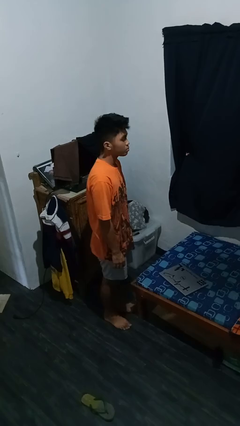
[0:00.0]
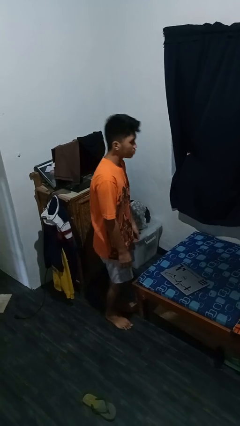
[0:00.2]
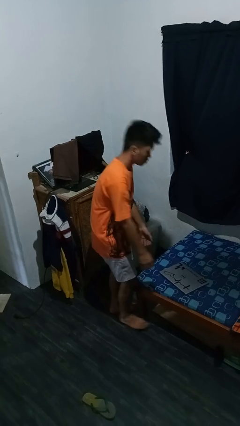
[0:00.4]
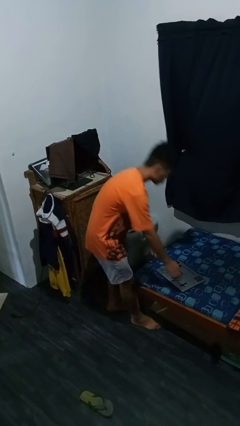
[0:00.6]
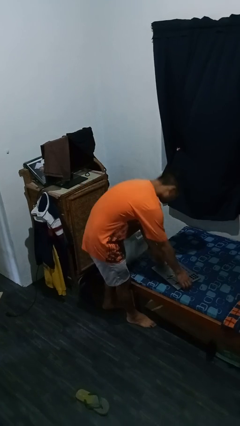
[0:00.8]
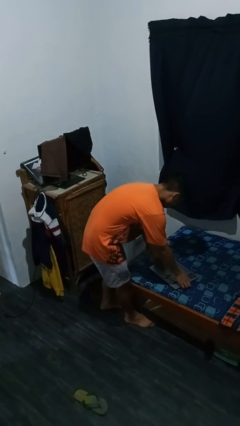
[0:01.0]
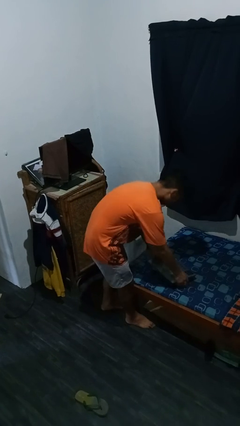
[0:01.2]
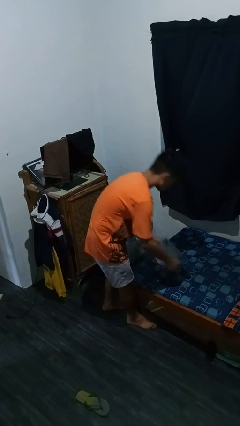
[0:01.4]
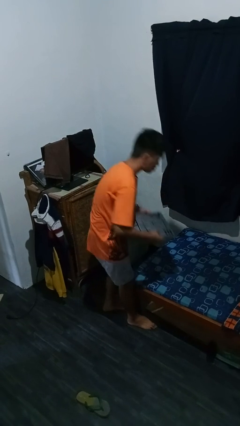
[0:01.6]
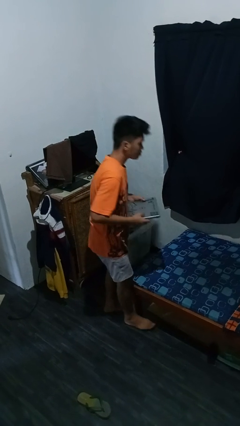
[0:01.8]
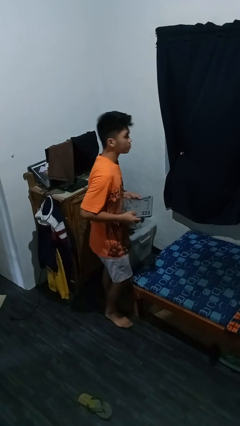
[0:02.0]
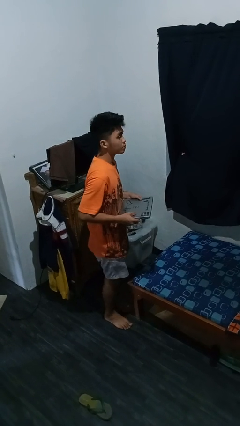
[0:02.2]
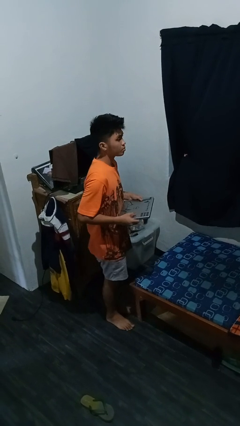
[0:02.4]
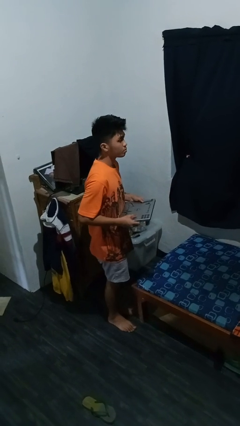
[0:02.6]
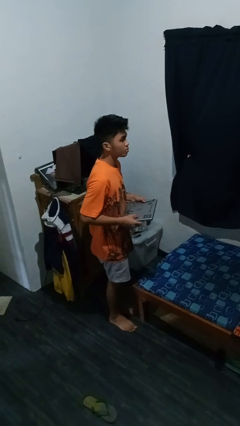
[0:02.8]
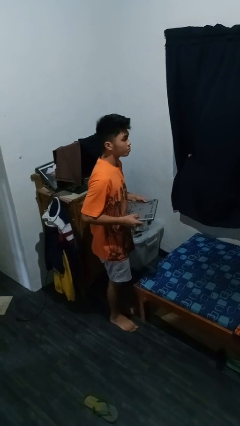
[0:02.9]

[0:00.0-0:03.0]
person picks up object from bed

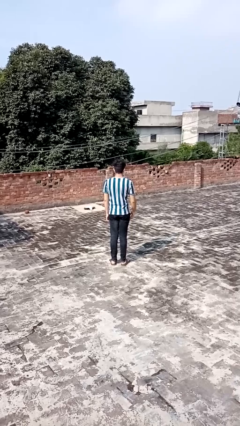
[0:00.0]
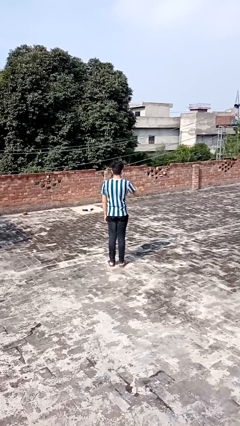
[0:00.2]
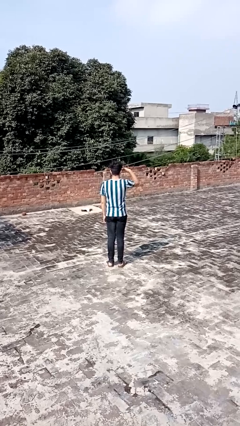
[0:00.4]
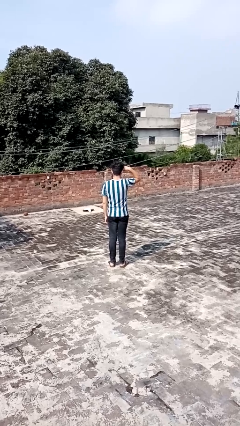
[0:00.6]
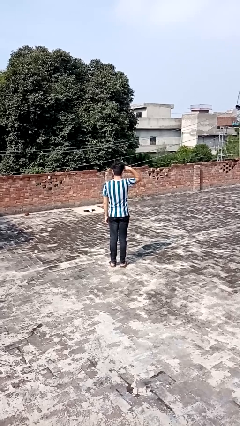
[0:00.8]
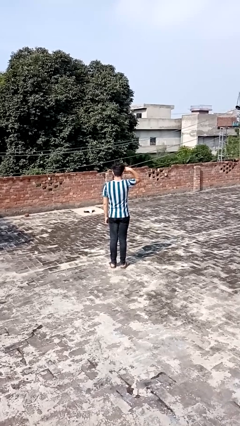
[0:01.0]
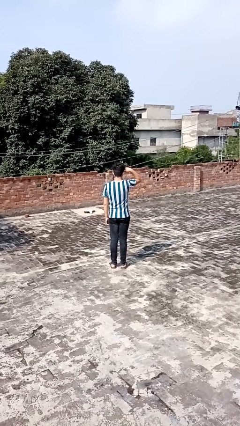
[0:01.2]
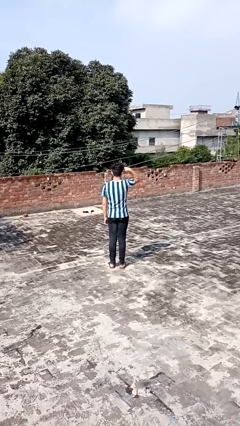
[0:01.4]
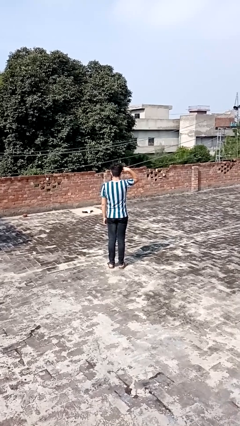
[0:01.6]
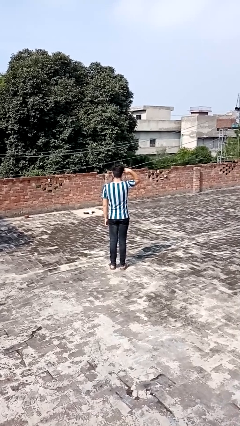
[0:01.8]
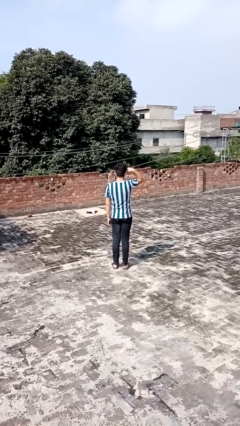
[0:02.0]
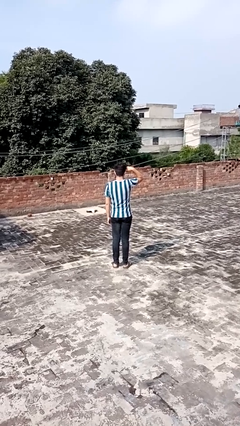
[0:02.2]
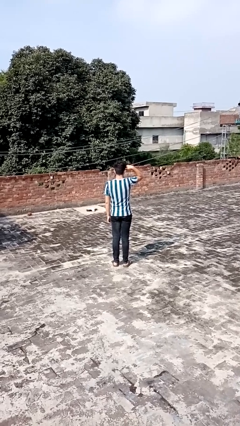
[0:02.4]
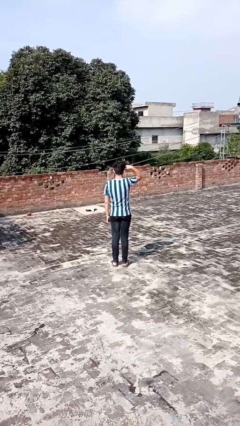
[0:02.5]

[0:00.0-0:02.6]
person salutes

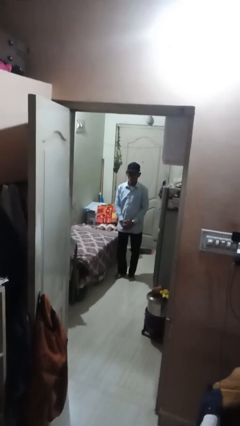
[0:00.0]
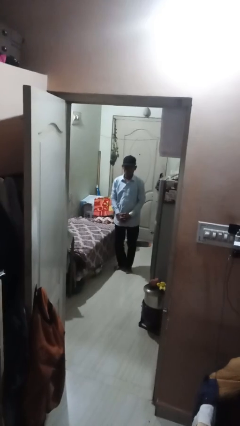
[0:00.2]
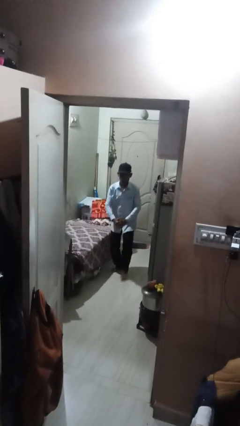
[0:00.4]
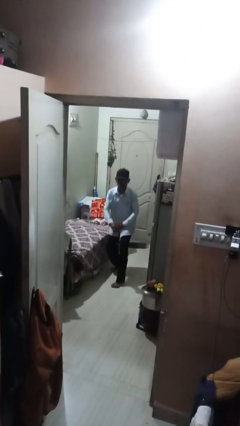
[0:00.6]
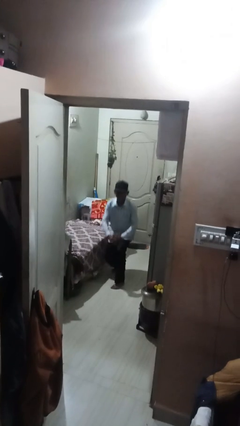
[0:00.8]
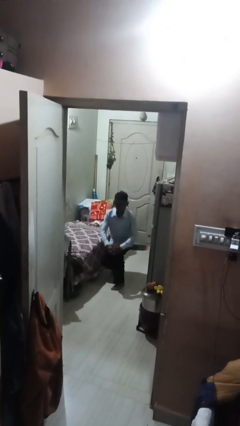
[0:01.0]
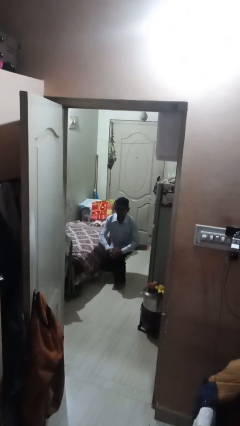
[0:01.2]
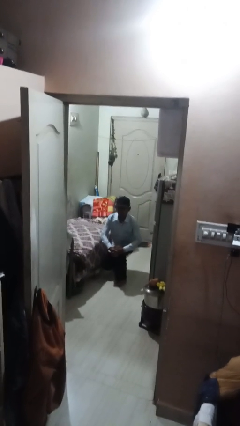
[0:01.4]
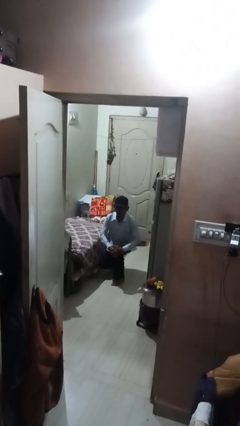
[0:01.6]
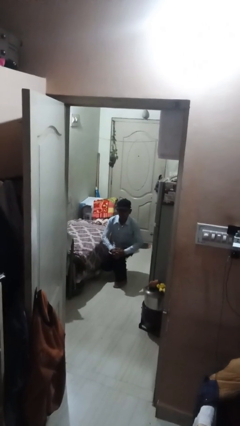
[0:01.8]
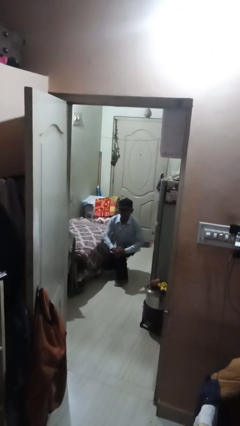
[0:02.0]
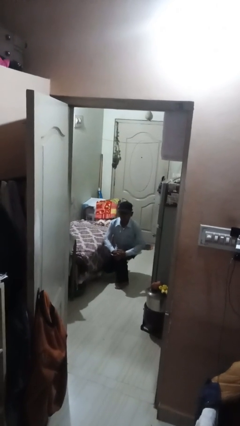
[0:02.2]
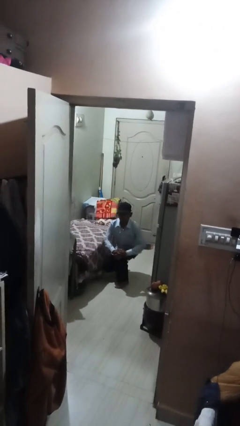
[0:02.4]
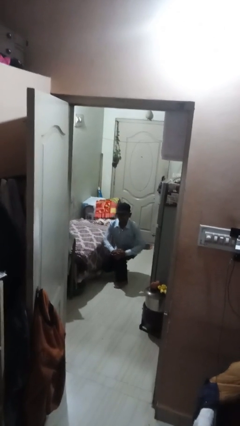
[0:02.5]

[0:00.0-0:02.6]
person exercises with lunges

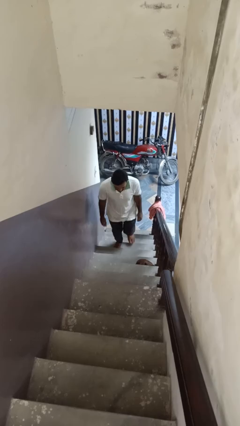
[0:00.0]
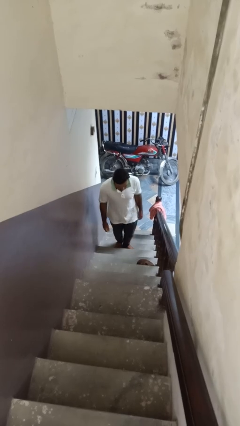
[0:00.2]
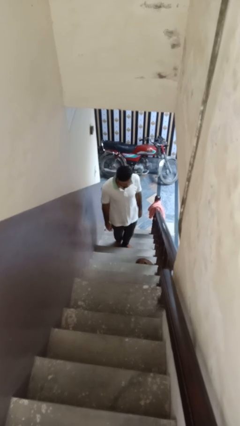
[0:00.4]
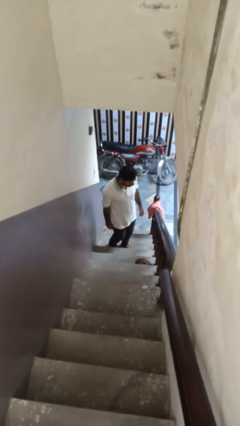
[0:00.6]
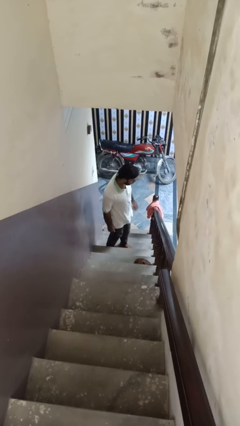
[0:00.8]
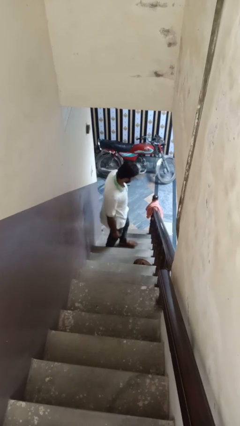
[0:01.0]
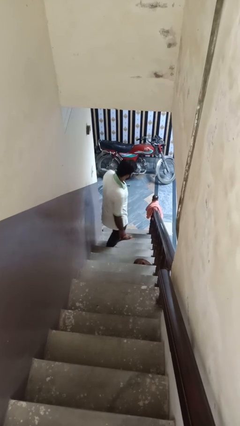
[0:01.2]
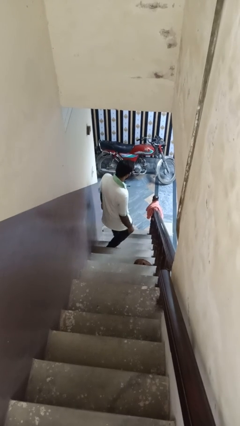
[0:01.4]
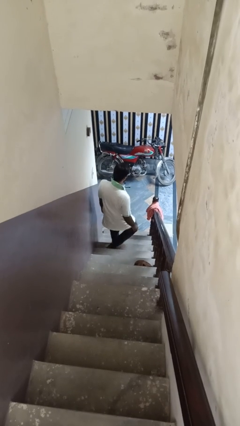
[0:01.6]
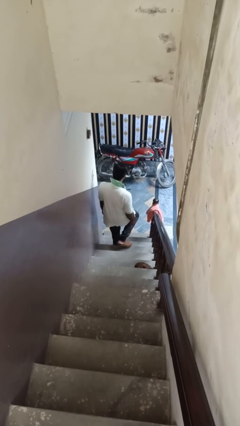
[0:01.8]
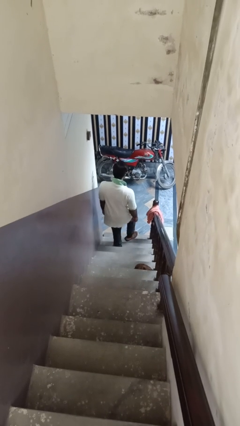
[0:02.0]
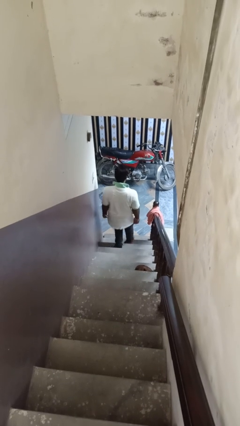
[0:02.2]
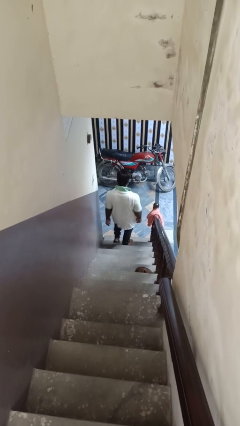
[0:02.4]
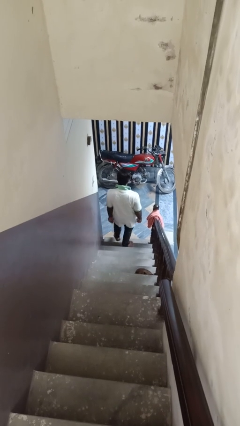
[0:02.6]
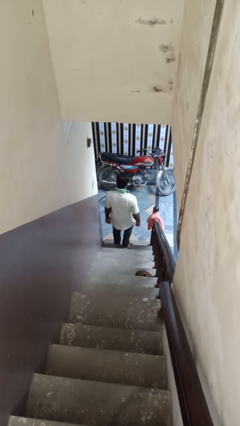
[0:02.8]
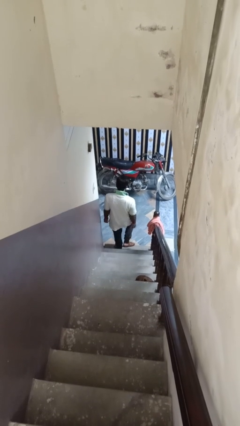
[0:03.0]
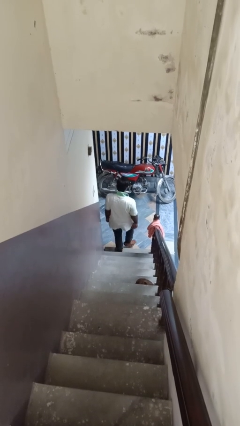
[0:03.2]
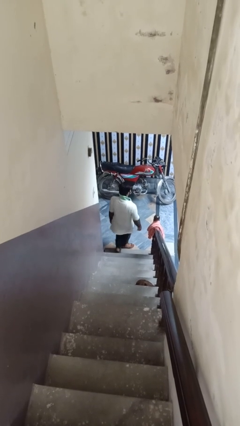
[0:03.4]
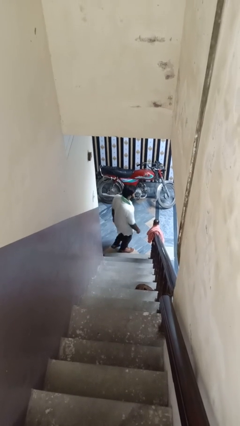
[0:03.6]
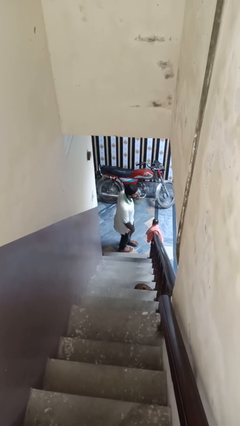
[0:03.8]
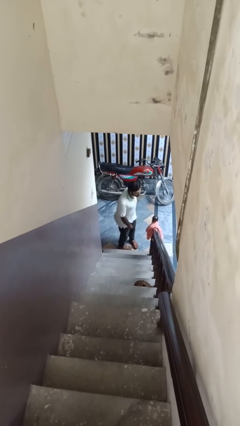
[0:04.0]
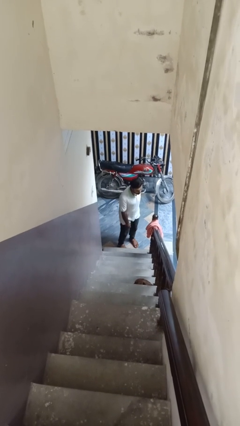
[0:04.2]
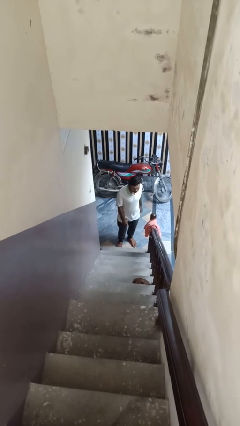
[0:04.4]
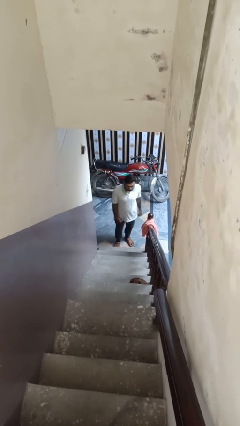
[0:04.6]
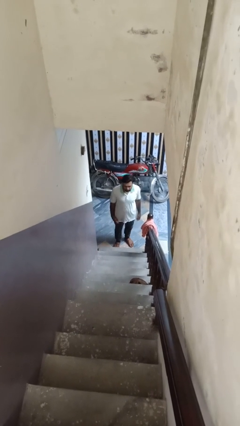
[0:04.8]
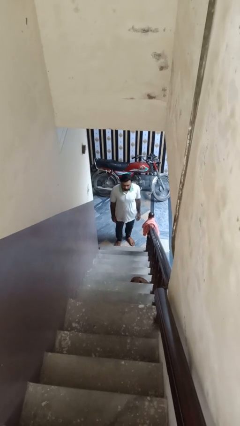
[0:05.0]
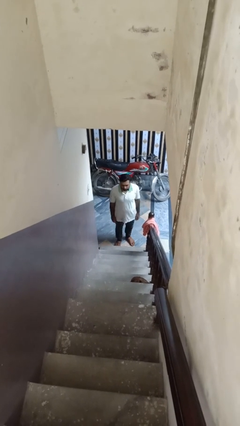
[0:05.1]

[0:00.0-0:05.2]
person climbs down ladder

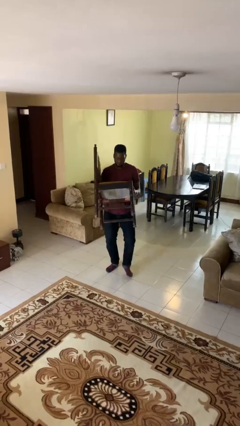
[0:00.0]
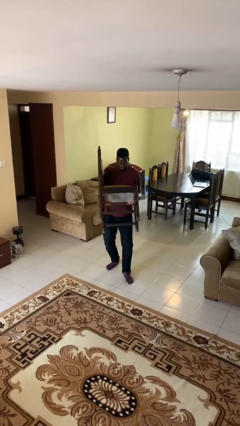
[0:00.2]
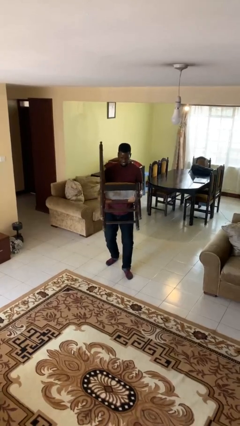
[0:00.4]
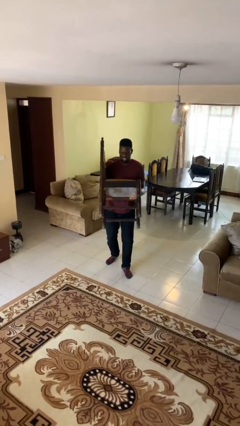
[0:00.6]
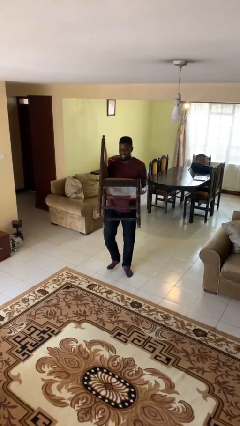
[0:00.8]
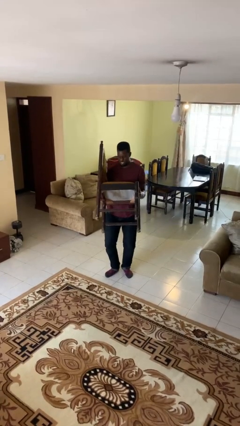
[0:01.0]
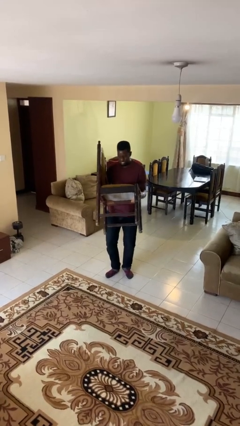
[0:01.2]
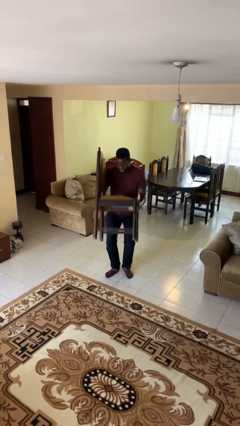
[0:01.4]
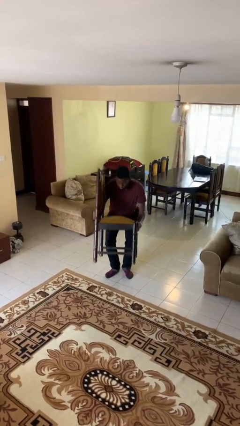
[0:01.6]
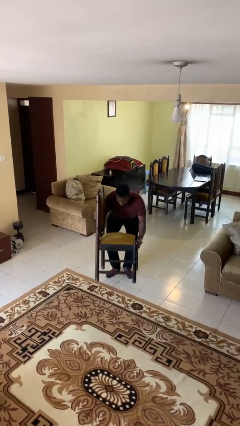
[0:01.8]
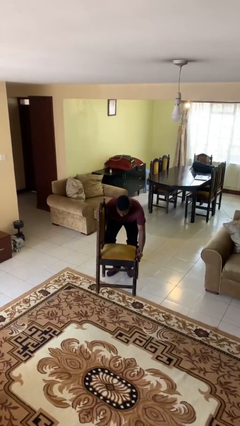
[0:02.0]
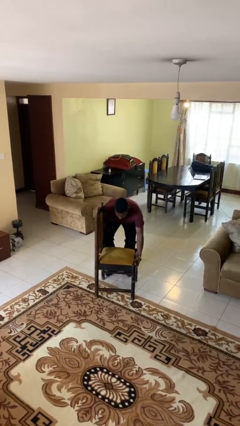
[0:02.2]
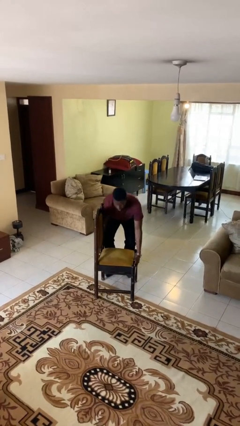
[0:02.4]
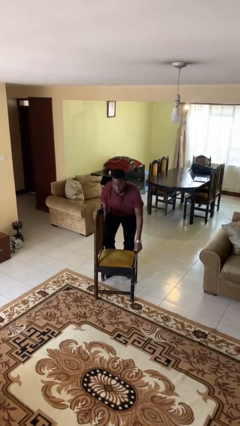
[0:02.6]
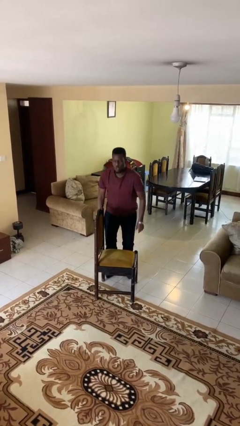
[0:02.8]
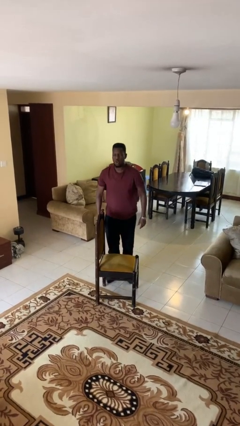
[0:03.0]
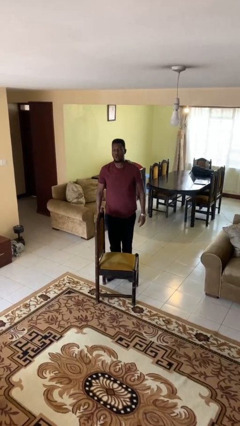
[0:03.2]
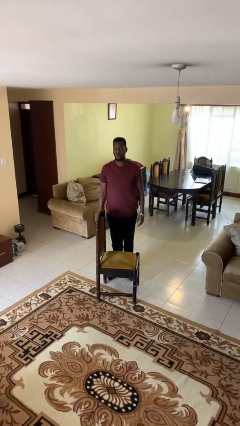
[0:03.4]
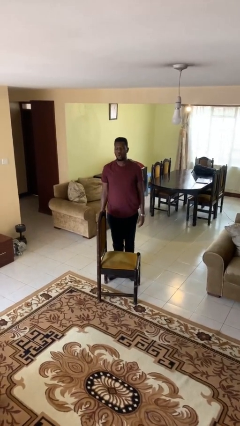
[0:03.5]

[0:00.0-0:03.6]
person puts down object on floor

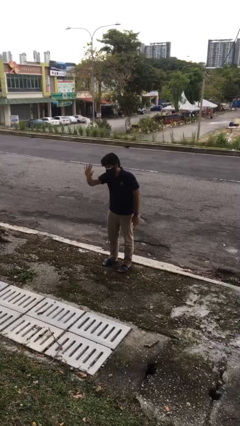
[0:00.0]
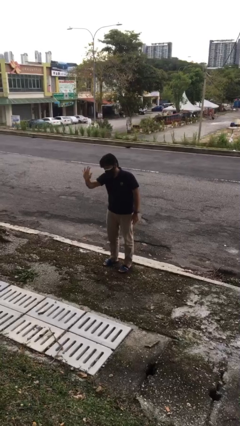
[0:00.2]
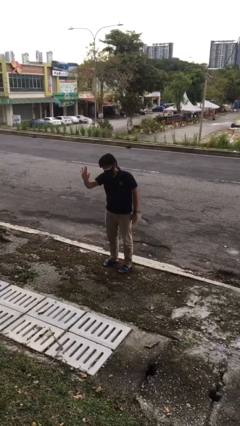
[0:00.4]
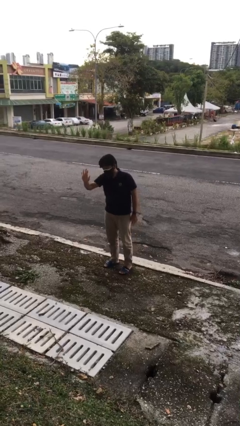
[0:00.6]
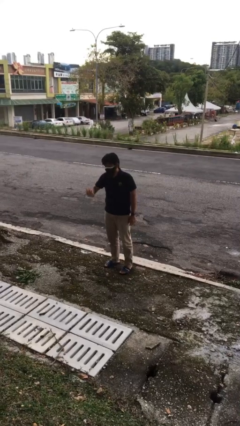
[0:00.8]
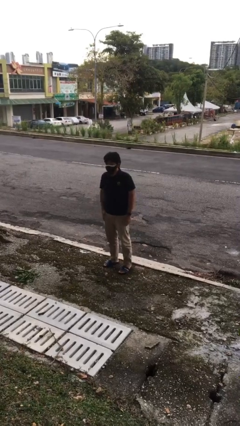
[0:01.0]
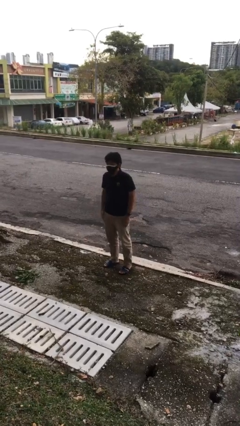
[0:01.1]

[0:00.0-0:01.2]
person gestures stop
